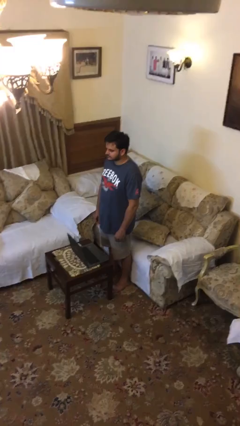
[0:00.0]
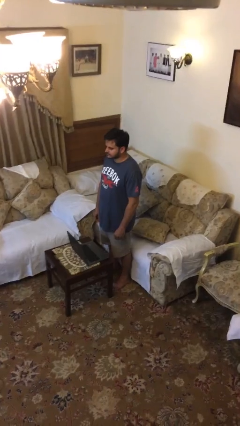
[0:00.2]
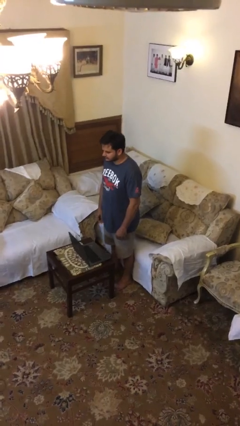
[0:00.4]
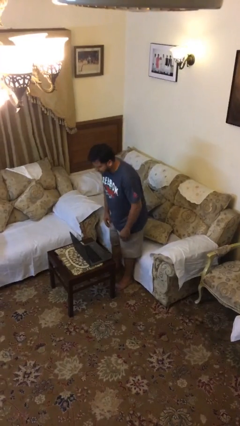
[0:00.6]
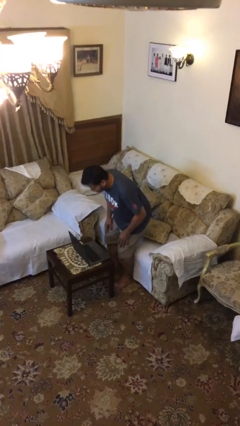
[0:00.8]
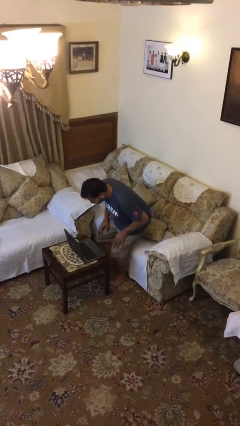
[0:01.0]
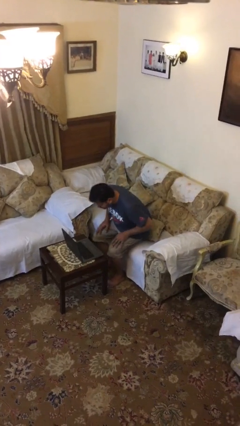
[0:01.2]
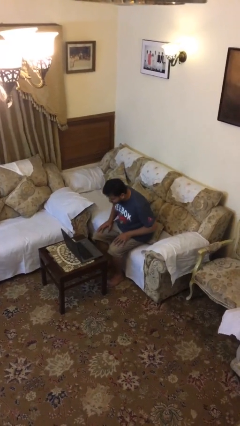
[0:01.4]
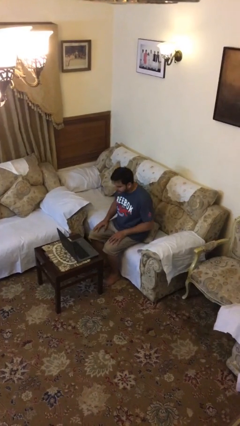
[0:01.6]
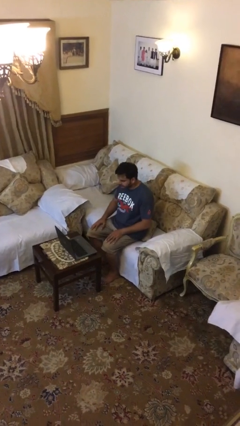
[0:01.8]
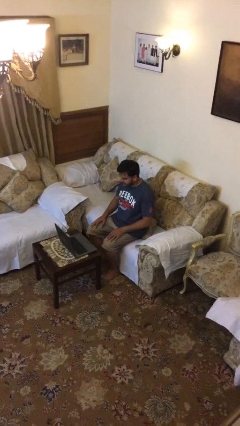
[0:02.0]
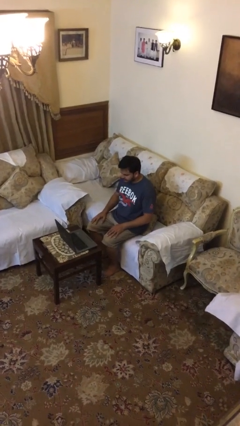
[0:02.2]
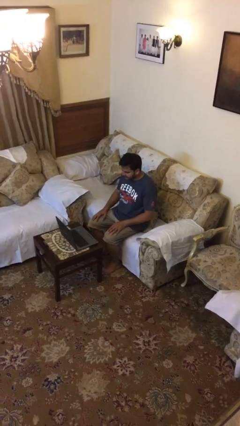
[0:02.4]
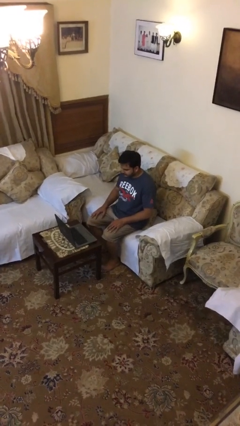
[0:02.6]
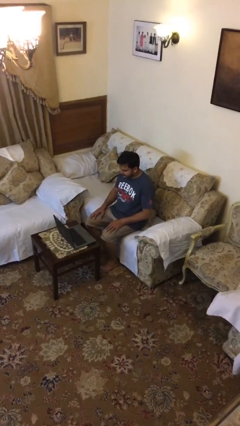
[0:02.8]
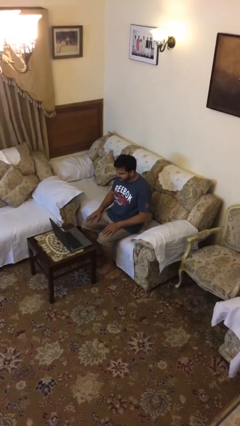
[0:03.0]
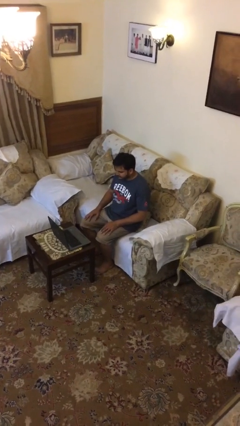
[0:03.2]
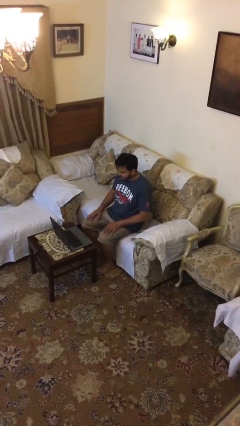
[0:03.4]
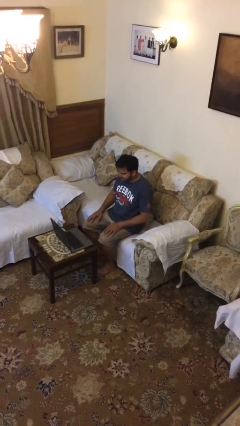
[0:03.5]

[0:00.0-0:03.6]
person sits down

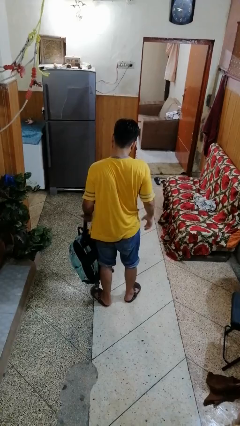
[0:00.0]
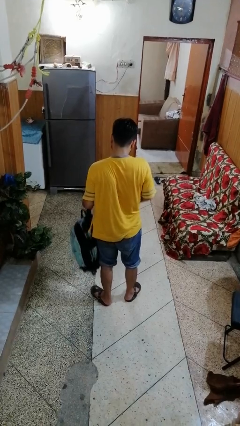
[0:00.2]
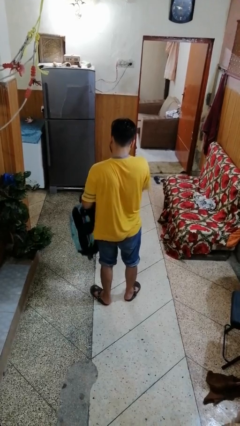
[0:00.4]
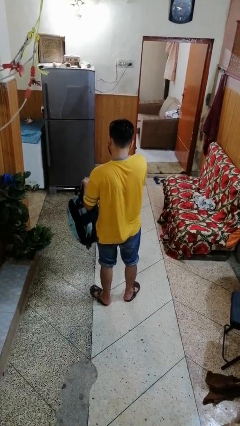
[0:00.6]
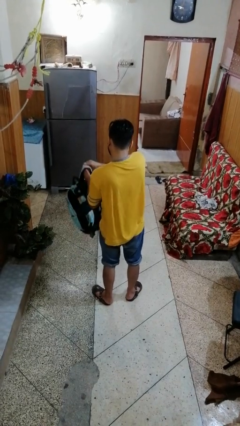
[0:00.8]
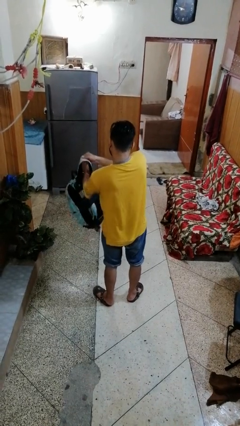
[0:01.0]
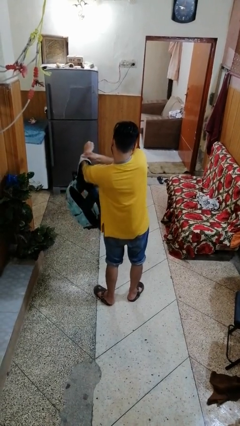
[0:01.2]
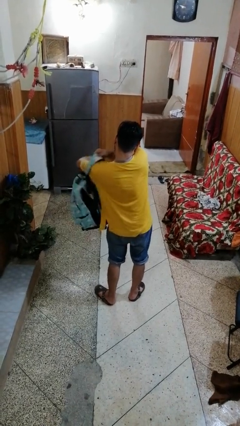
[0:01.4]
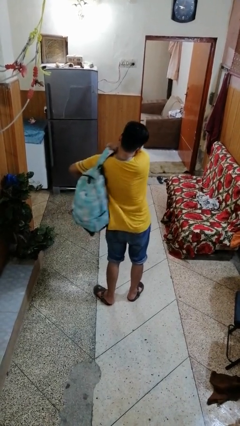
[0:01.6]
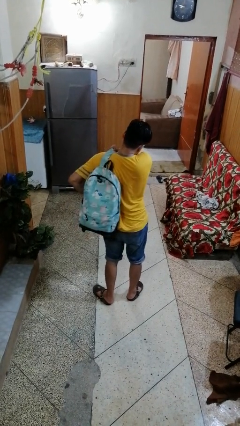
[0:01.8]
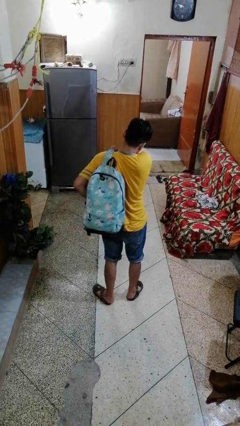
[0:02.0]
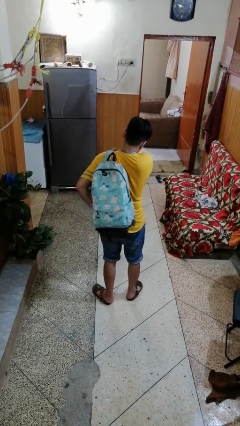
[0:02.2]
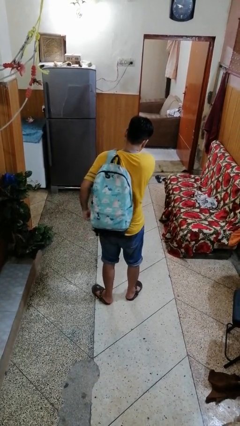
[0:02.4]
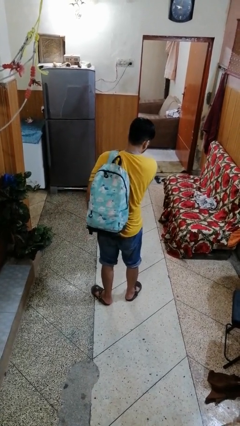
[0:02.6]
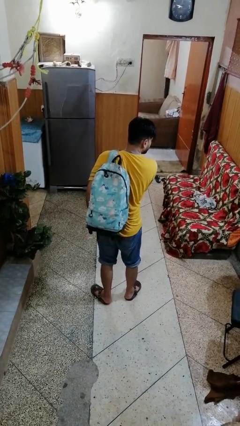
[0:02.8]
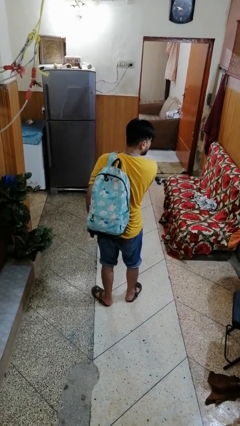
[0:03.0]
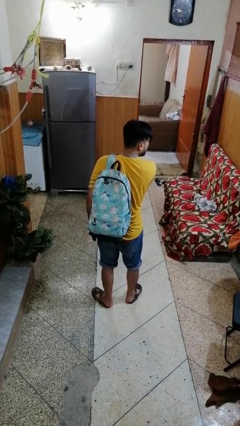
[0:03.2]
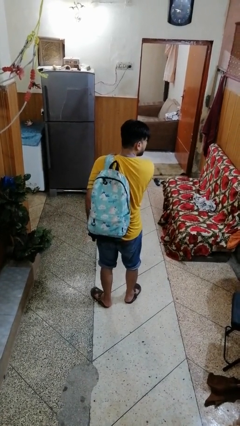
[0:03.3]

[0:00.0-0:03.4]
person puts on backpack

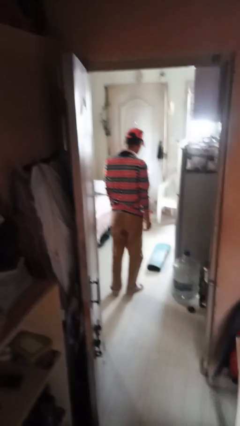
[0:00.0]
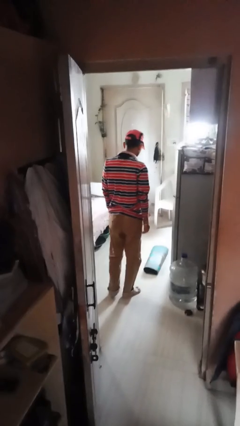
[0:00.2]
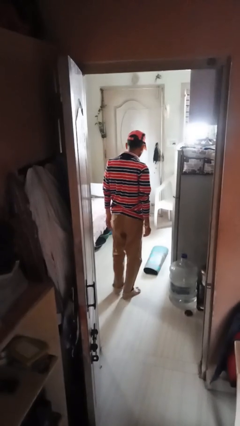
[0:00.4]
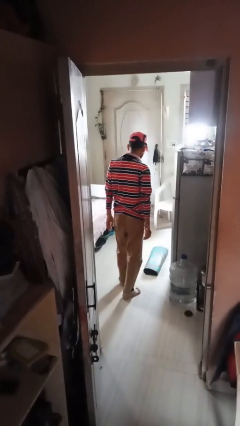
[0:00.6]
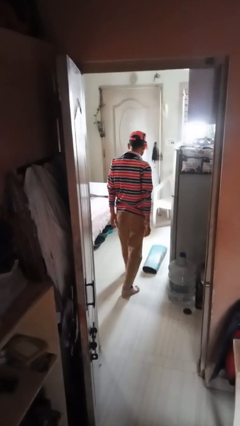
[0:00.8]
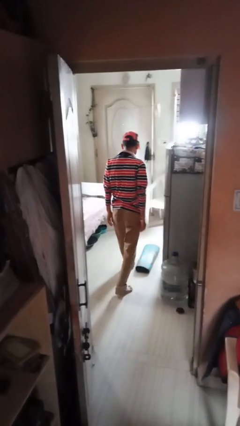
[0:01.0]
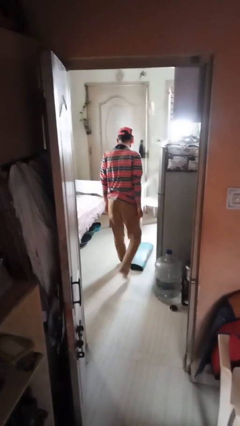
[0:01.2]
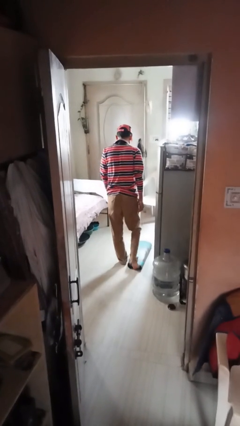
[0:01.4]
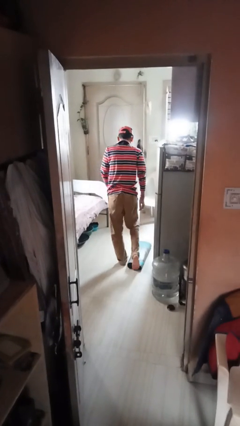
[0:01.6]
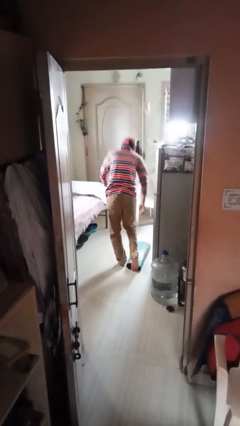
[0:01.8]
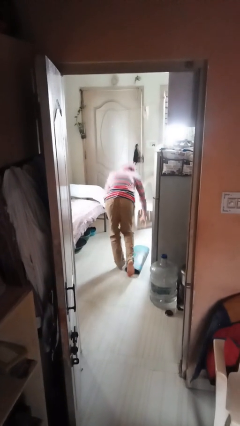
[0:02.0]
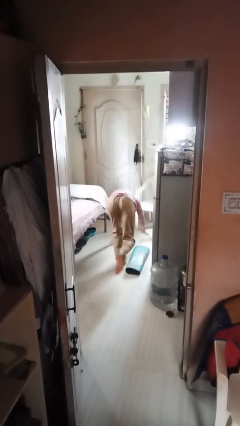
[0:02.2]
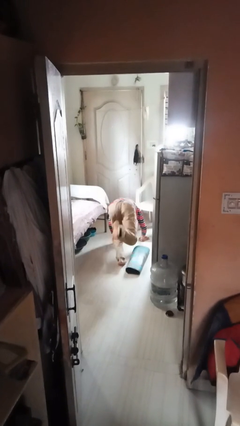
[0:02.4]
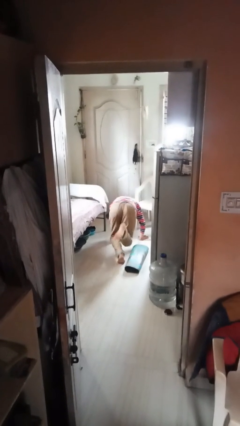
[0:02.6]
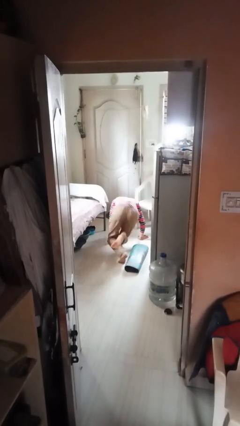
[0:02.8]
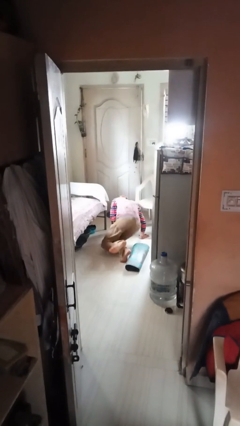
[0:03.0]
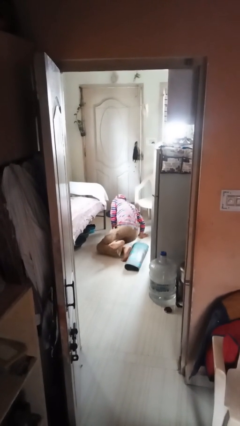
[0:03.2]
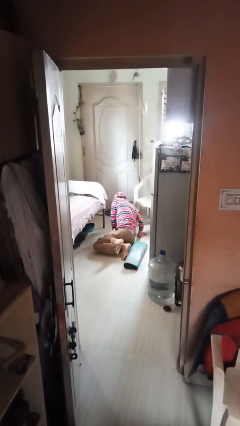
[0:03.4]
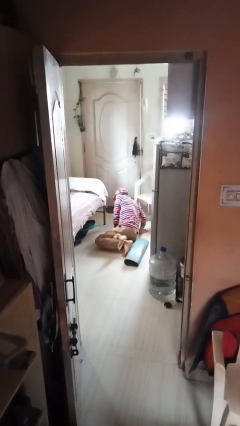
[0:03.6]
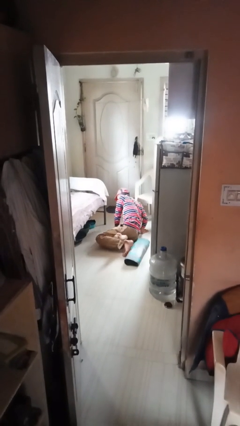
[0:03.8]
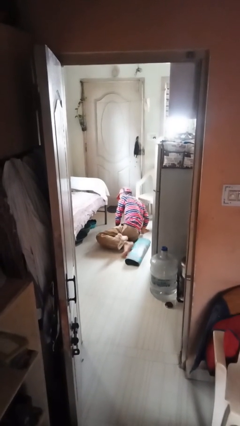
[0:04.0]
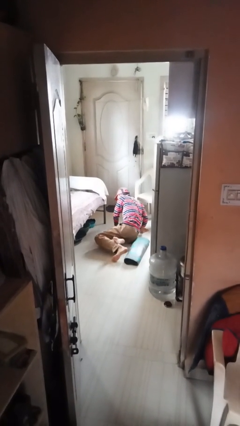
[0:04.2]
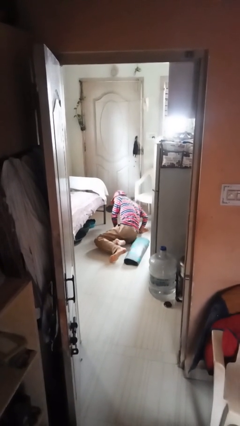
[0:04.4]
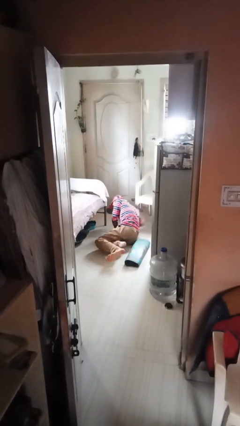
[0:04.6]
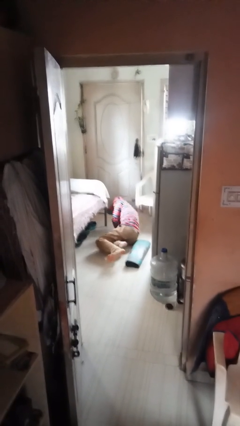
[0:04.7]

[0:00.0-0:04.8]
person trips on object on floor

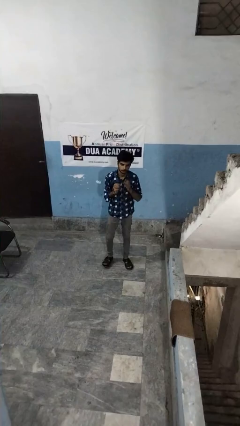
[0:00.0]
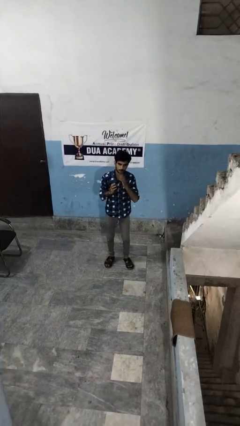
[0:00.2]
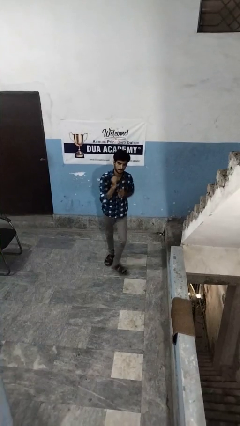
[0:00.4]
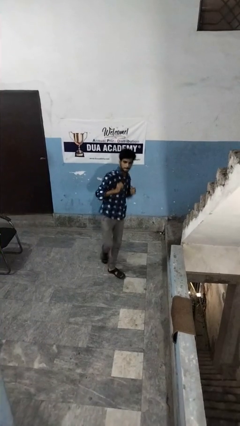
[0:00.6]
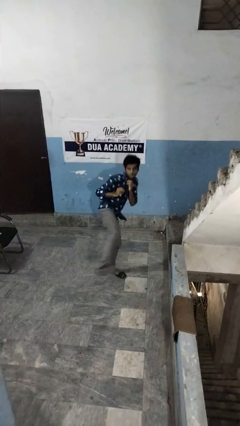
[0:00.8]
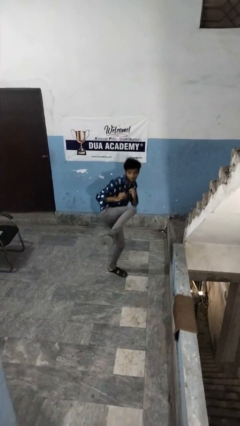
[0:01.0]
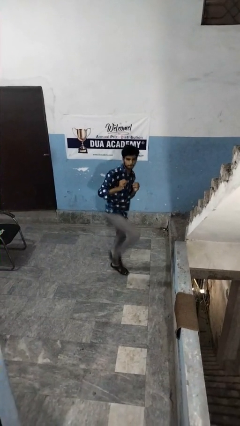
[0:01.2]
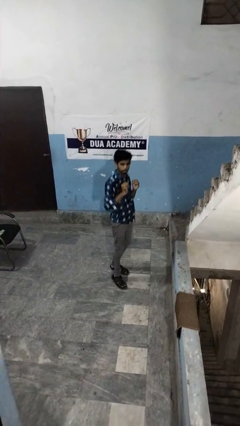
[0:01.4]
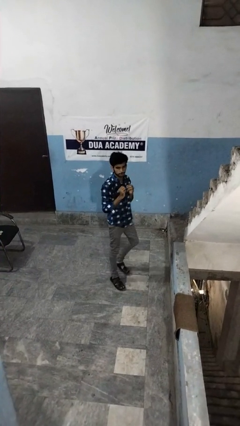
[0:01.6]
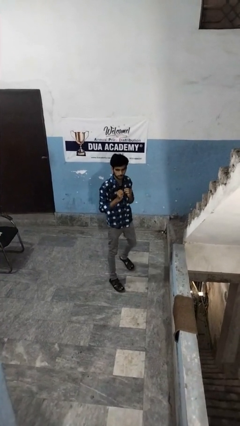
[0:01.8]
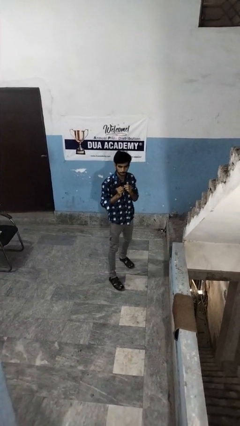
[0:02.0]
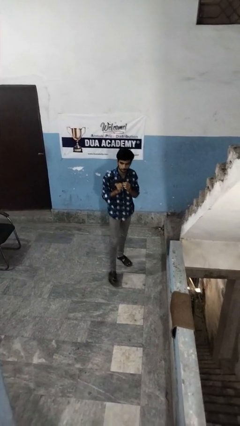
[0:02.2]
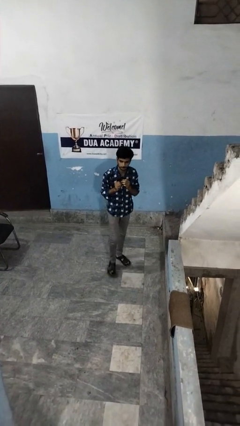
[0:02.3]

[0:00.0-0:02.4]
person karate kicks

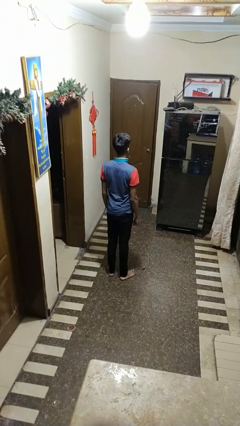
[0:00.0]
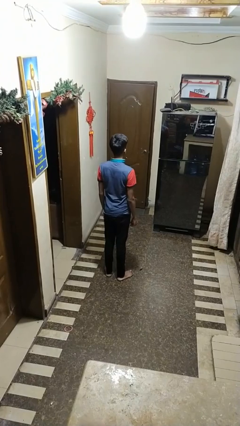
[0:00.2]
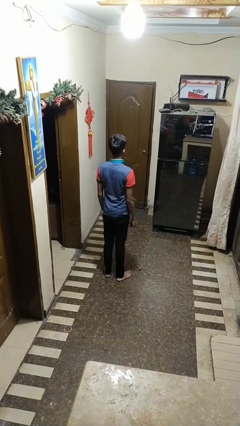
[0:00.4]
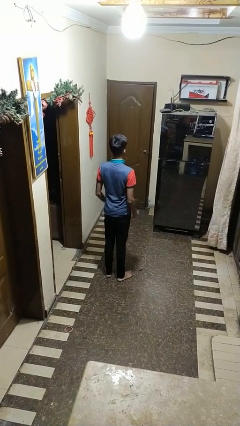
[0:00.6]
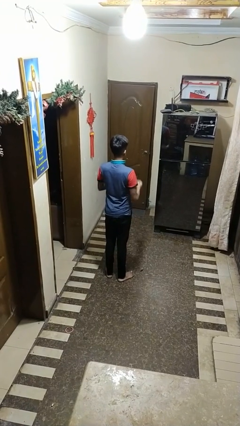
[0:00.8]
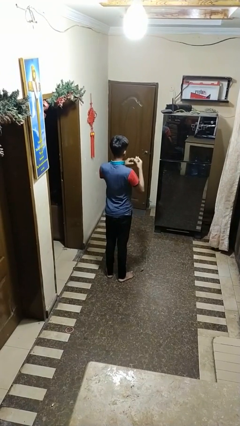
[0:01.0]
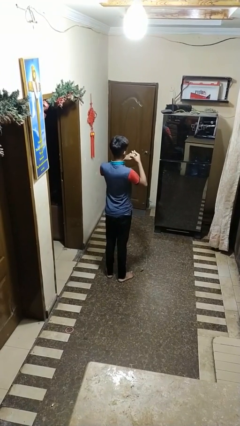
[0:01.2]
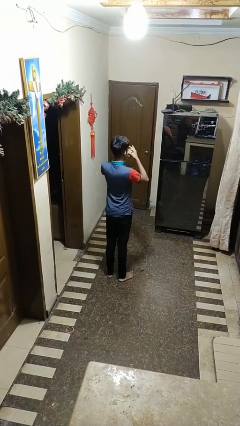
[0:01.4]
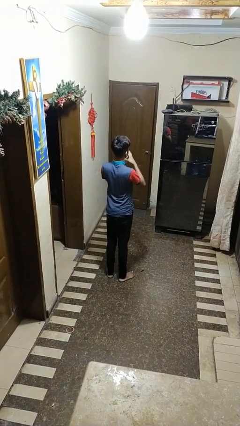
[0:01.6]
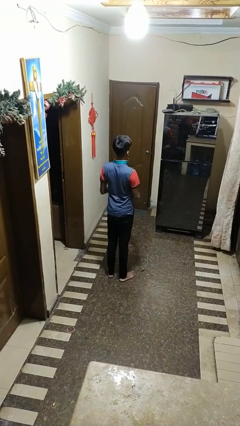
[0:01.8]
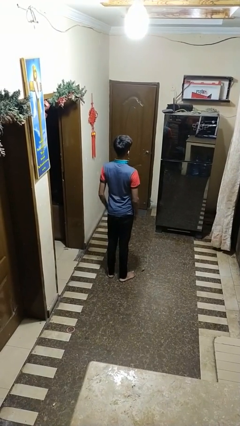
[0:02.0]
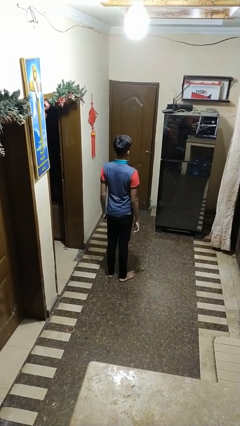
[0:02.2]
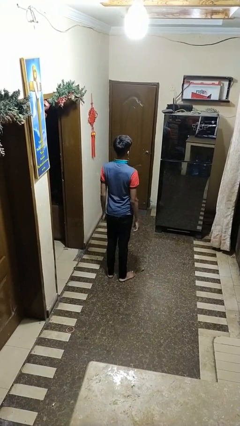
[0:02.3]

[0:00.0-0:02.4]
person puts on ring

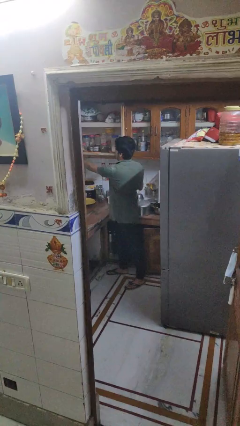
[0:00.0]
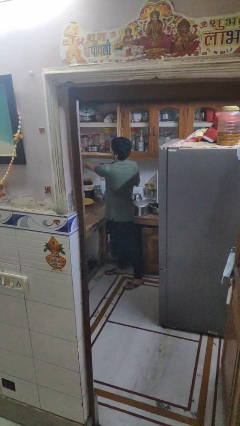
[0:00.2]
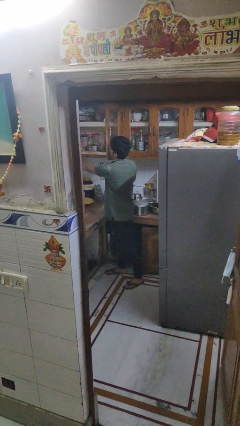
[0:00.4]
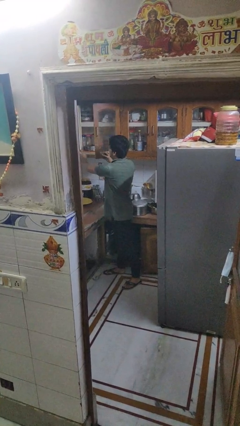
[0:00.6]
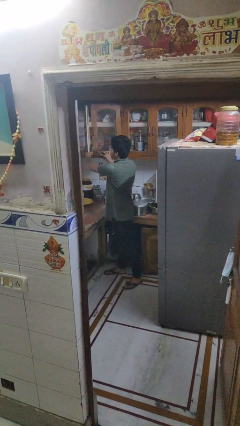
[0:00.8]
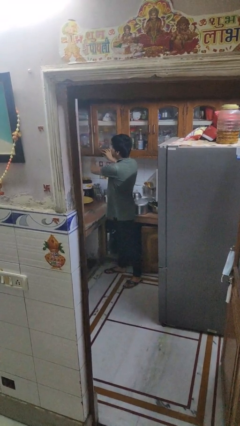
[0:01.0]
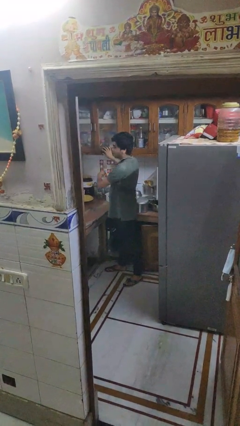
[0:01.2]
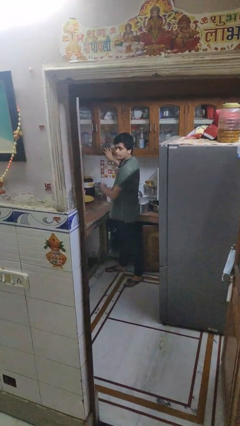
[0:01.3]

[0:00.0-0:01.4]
person closes cabinet
